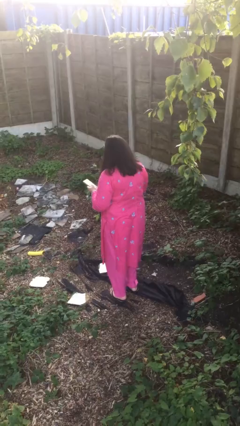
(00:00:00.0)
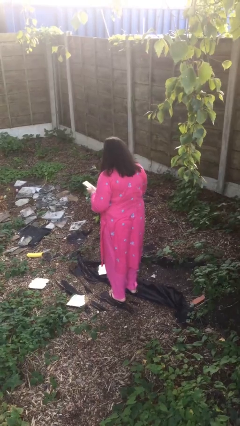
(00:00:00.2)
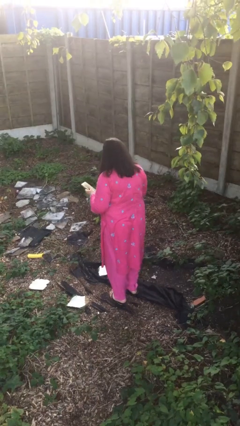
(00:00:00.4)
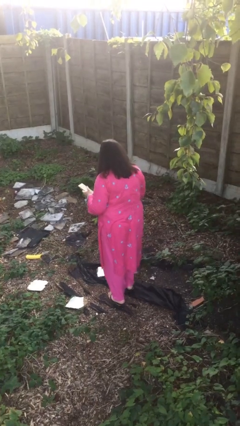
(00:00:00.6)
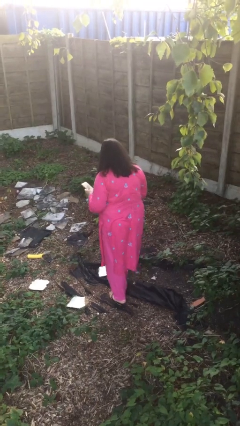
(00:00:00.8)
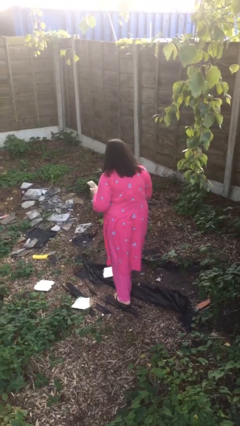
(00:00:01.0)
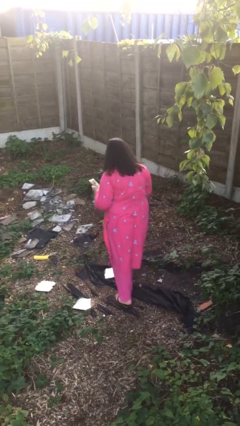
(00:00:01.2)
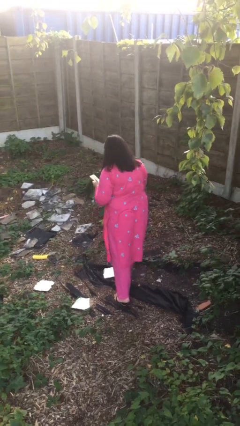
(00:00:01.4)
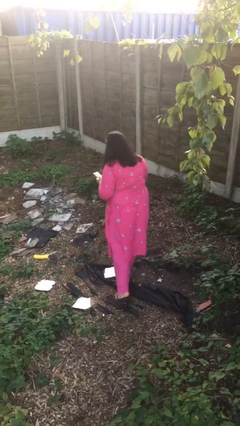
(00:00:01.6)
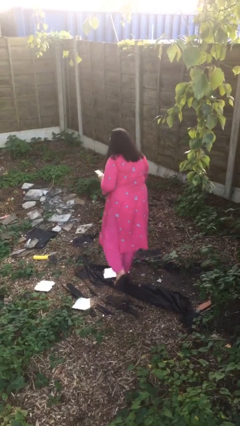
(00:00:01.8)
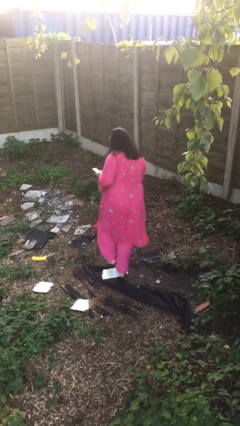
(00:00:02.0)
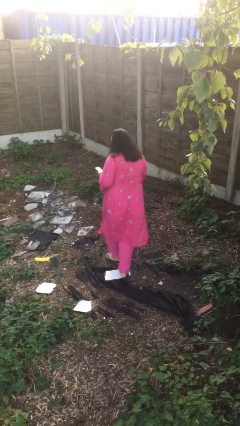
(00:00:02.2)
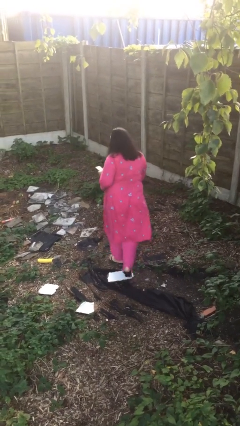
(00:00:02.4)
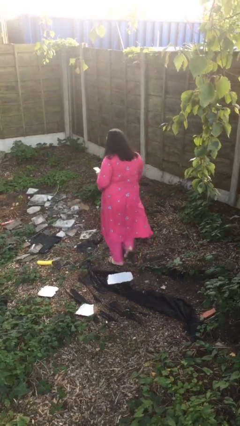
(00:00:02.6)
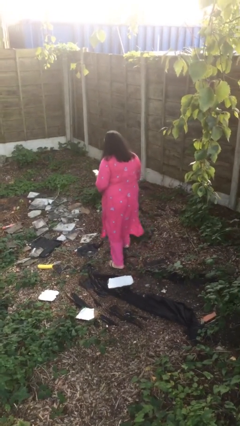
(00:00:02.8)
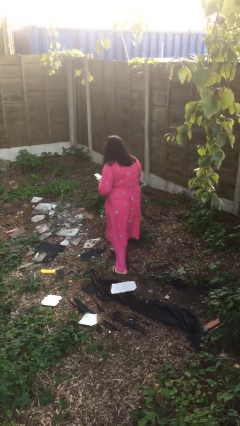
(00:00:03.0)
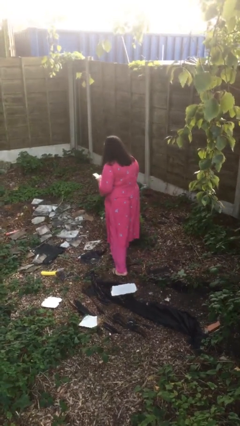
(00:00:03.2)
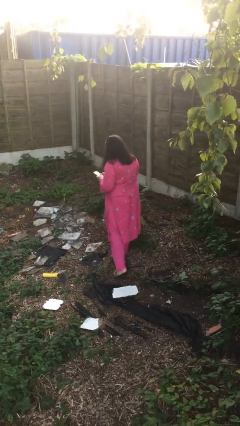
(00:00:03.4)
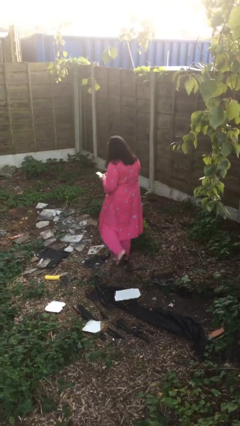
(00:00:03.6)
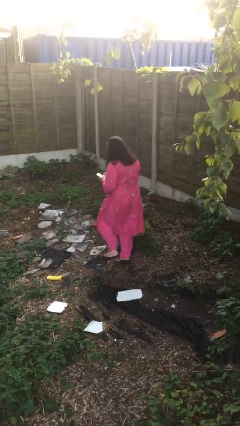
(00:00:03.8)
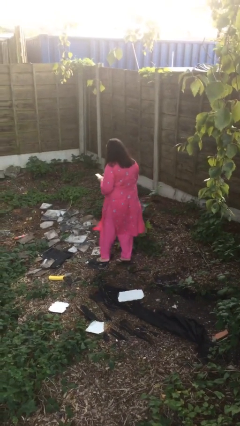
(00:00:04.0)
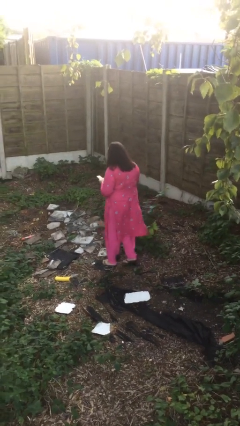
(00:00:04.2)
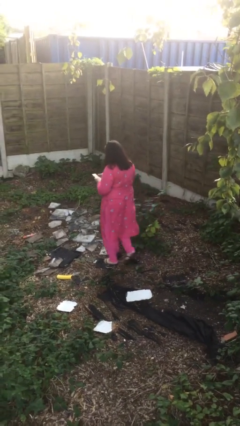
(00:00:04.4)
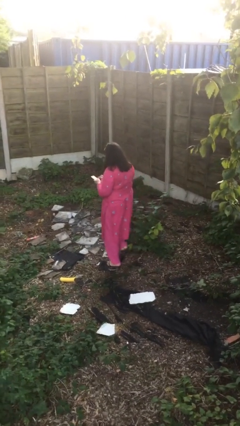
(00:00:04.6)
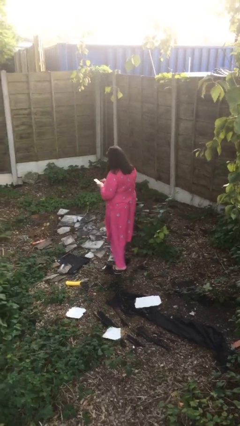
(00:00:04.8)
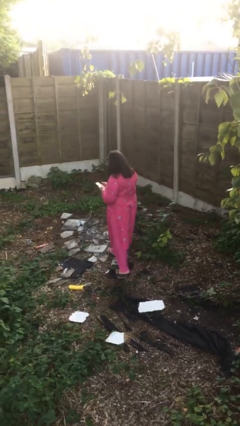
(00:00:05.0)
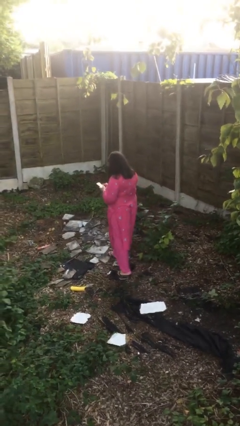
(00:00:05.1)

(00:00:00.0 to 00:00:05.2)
person texts on phone

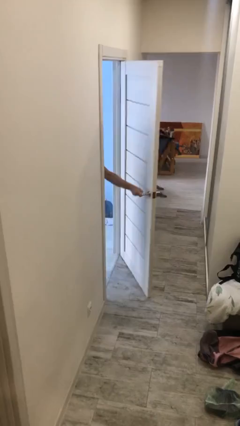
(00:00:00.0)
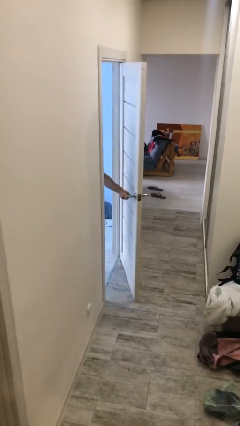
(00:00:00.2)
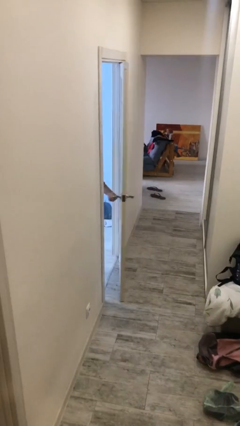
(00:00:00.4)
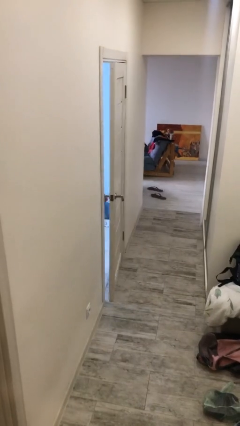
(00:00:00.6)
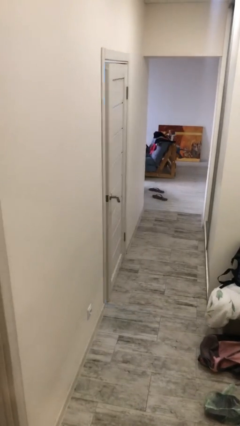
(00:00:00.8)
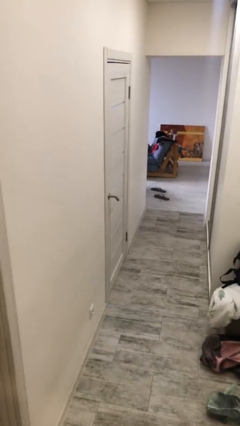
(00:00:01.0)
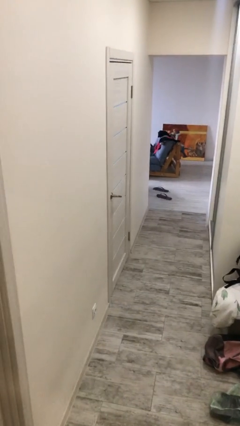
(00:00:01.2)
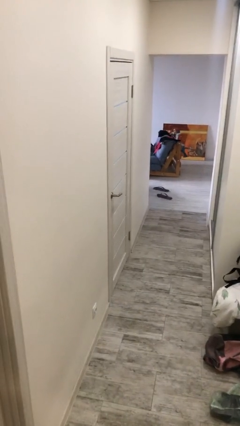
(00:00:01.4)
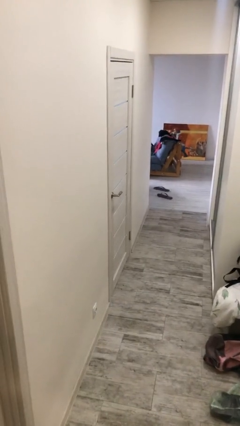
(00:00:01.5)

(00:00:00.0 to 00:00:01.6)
person closes facility door

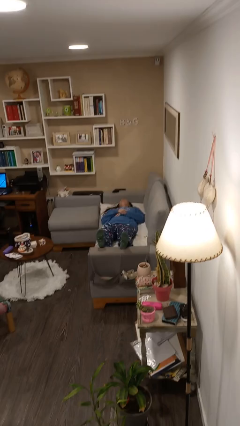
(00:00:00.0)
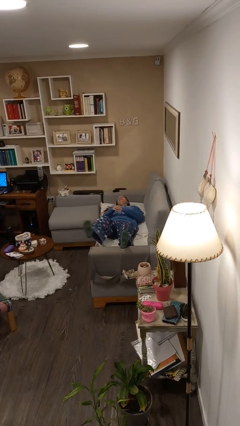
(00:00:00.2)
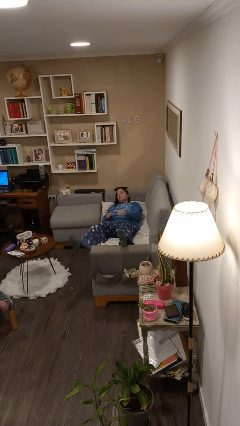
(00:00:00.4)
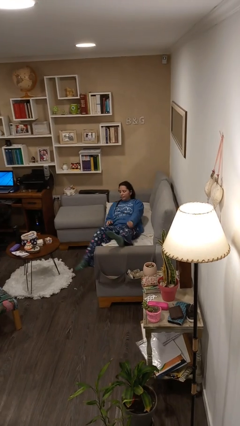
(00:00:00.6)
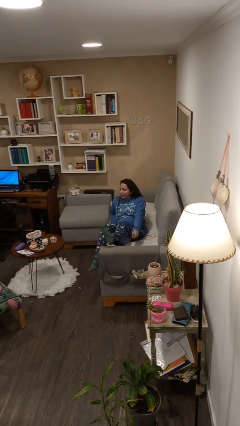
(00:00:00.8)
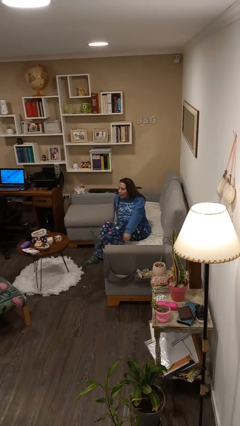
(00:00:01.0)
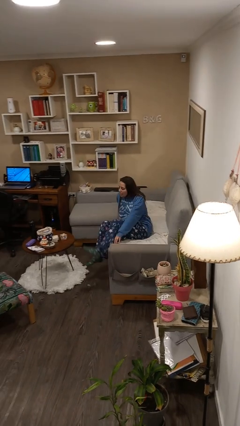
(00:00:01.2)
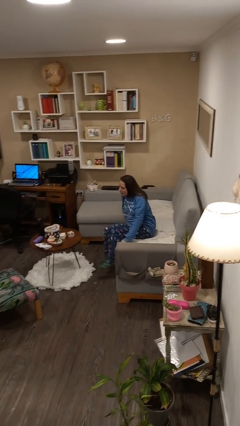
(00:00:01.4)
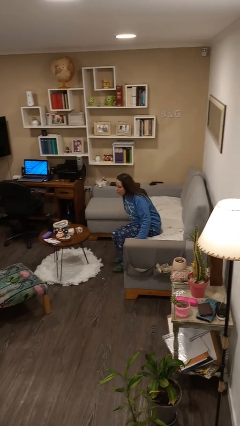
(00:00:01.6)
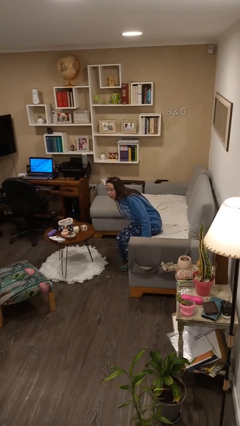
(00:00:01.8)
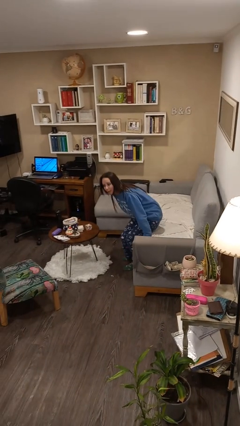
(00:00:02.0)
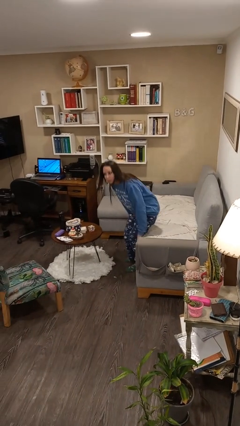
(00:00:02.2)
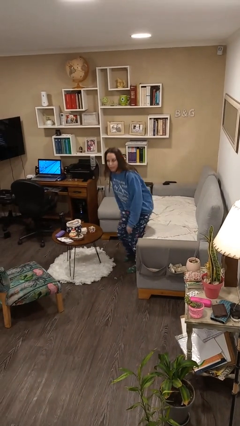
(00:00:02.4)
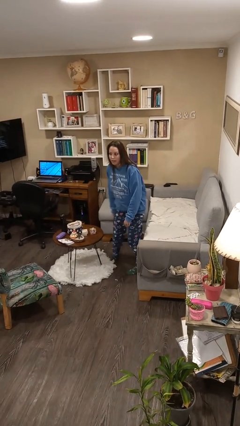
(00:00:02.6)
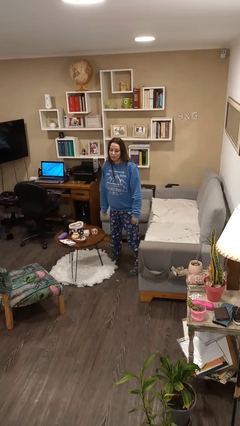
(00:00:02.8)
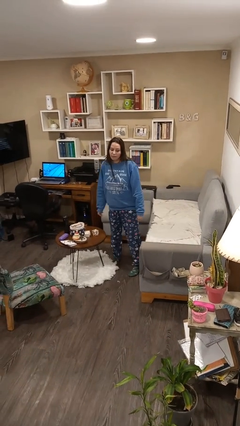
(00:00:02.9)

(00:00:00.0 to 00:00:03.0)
person stands up

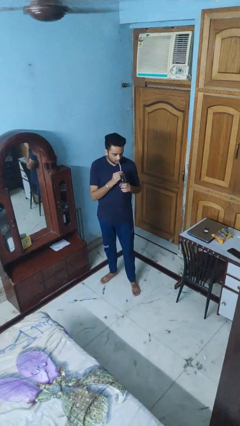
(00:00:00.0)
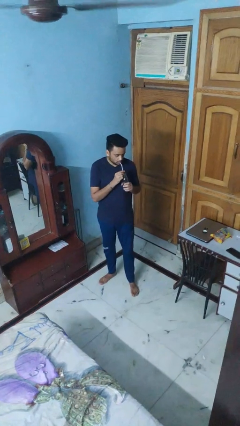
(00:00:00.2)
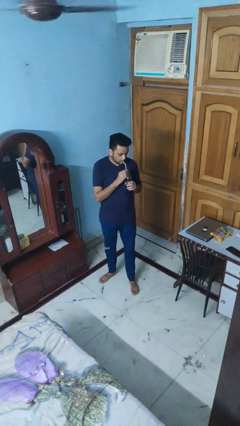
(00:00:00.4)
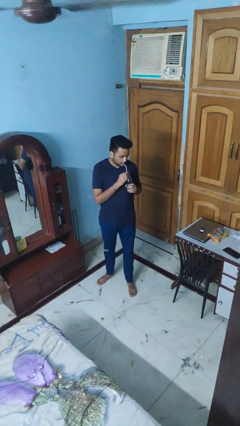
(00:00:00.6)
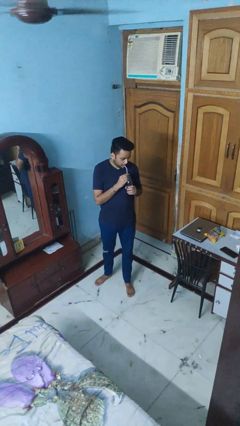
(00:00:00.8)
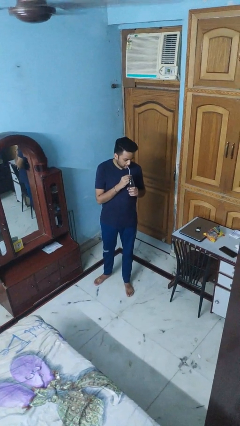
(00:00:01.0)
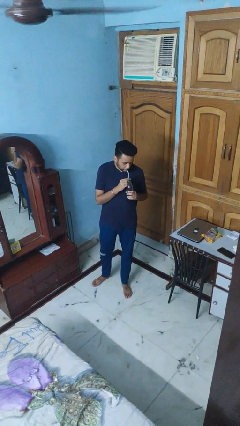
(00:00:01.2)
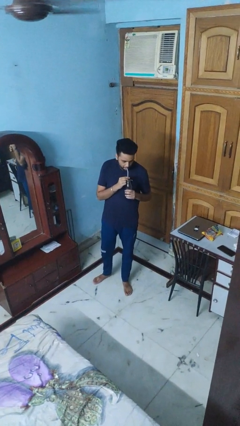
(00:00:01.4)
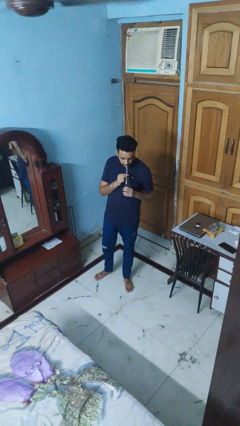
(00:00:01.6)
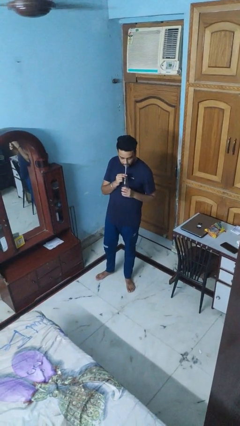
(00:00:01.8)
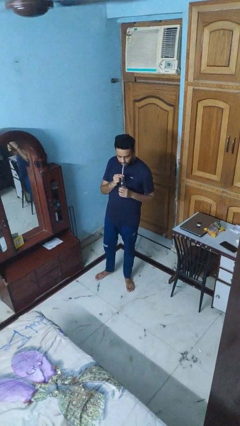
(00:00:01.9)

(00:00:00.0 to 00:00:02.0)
person drinks from straw

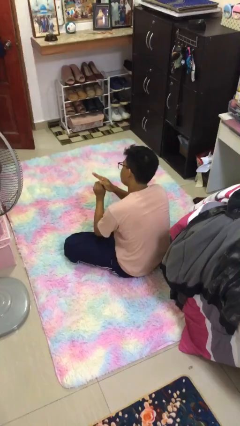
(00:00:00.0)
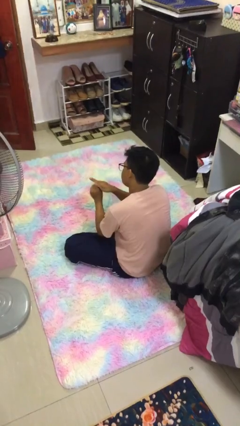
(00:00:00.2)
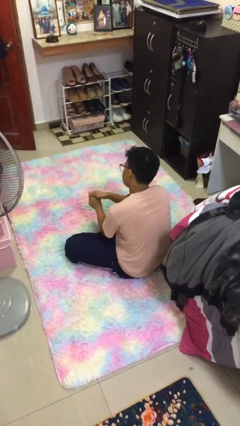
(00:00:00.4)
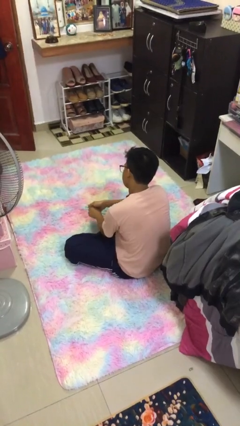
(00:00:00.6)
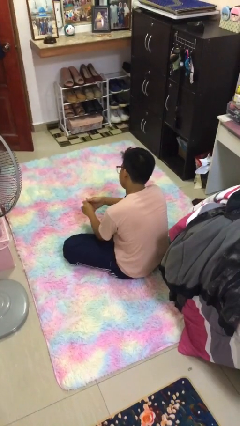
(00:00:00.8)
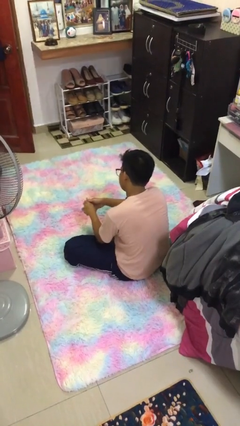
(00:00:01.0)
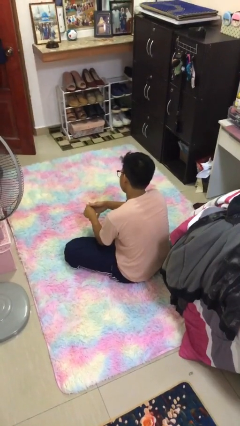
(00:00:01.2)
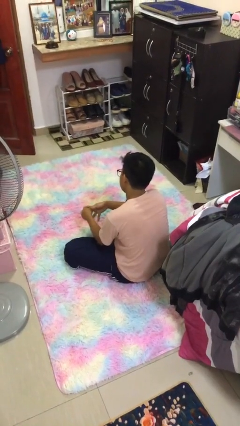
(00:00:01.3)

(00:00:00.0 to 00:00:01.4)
person takes off ring

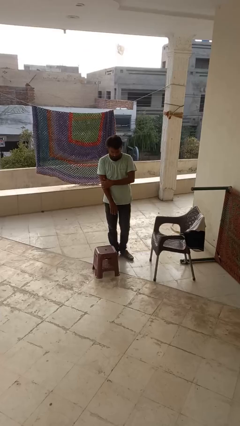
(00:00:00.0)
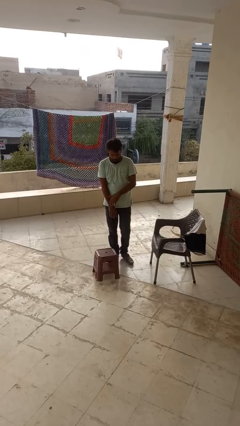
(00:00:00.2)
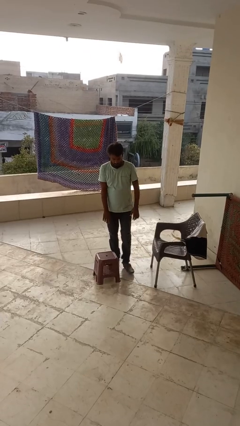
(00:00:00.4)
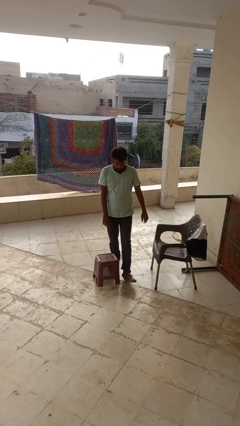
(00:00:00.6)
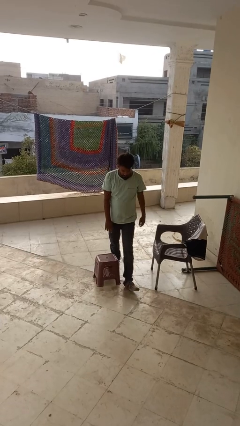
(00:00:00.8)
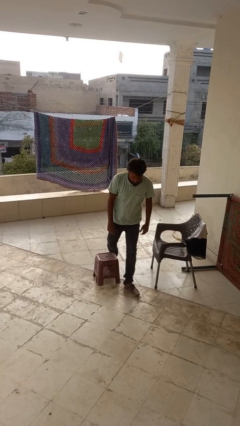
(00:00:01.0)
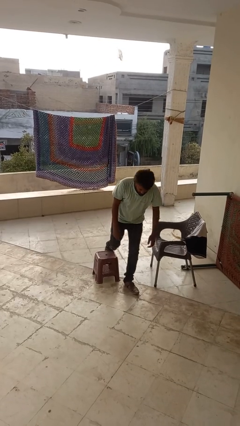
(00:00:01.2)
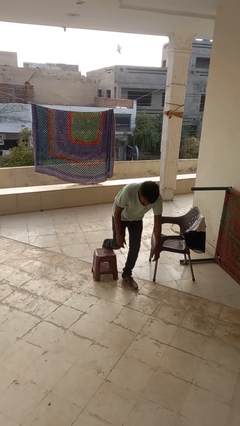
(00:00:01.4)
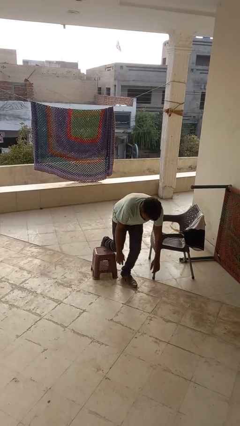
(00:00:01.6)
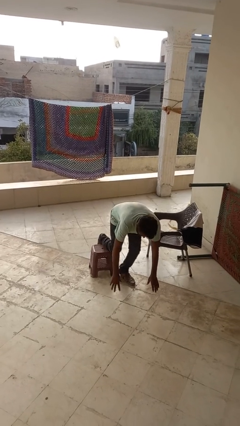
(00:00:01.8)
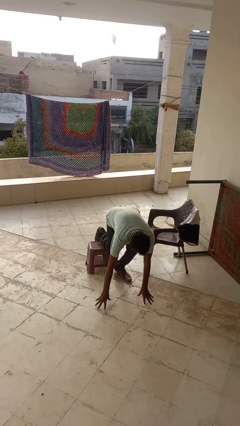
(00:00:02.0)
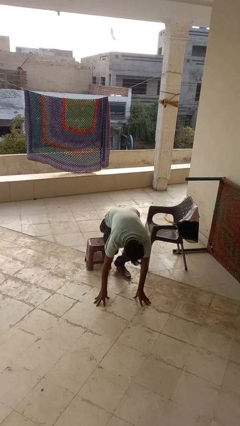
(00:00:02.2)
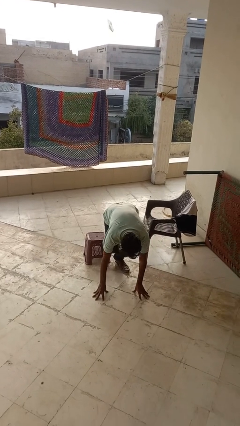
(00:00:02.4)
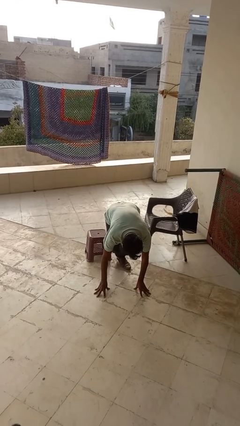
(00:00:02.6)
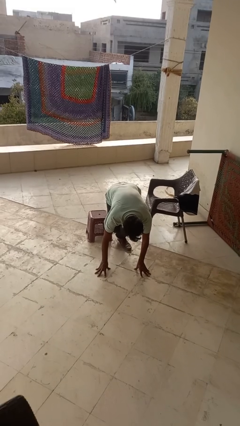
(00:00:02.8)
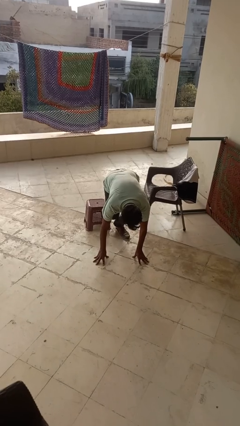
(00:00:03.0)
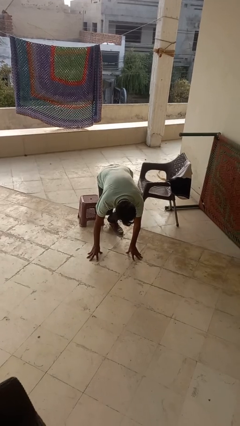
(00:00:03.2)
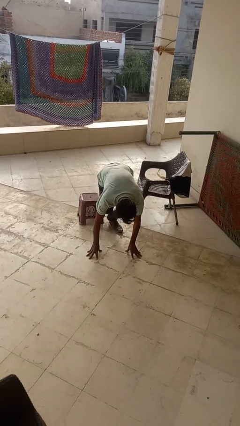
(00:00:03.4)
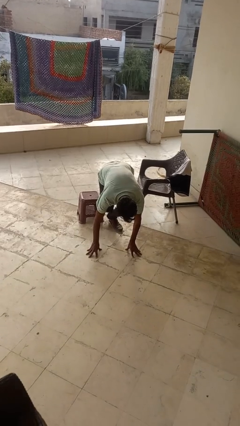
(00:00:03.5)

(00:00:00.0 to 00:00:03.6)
person trips on object on floor

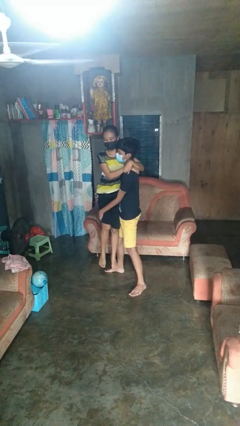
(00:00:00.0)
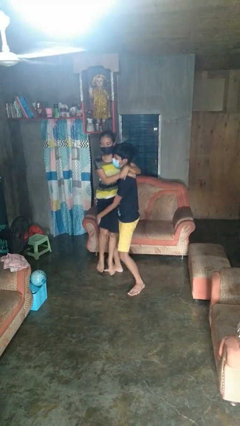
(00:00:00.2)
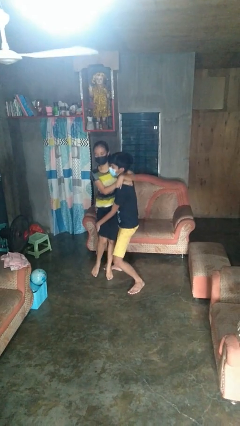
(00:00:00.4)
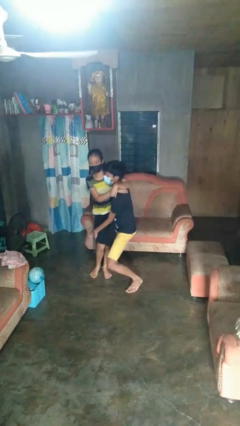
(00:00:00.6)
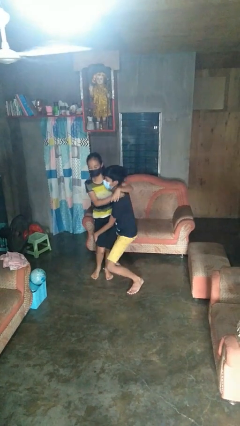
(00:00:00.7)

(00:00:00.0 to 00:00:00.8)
person puts down person
